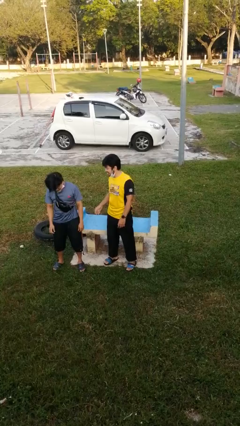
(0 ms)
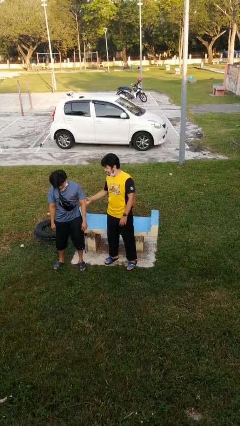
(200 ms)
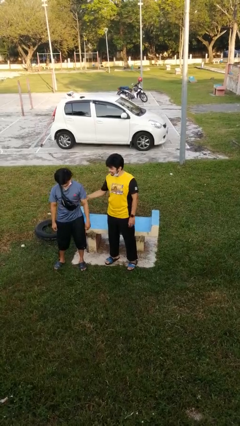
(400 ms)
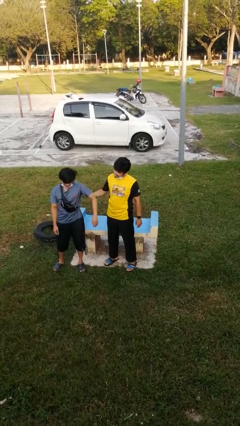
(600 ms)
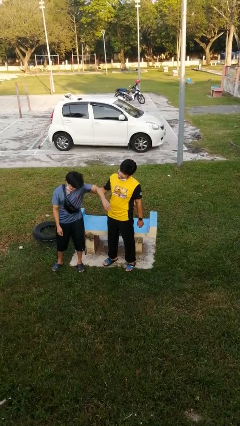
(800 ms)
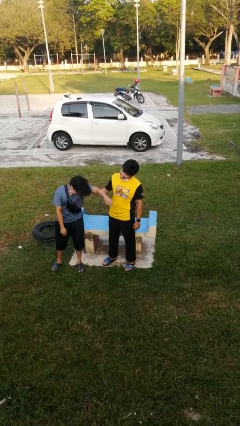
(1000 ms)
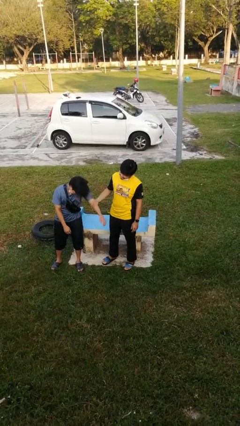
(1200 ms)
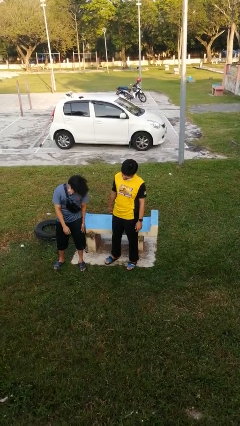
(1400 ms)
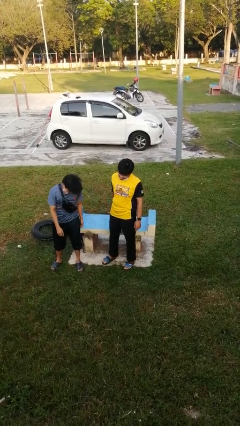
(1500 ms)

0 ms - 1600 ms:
person grabs person by bicep

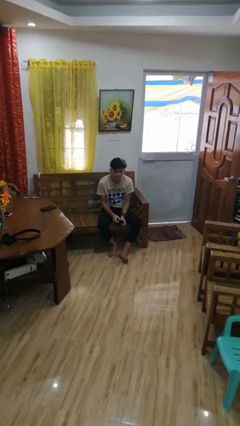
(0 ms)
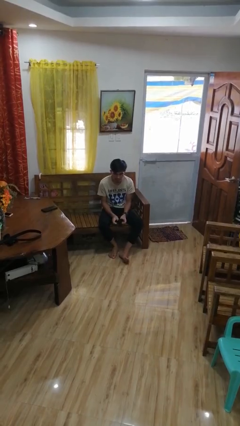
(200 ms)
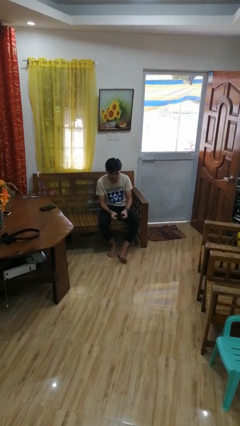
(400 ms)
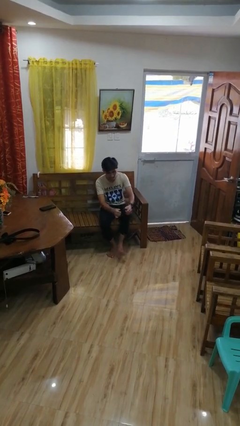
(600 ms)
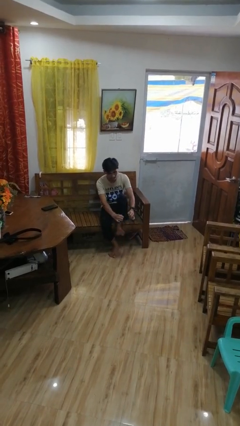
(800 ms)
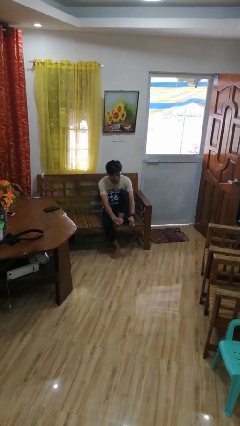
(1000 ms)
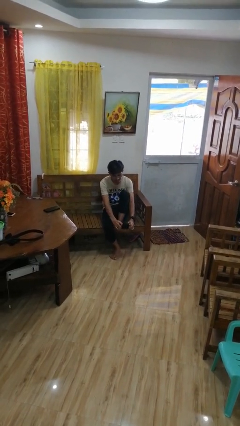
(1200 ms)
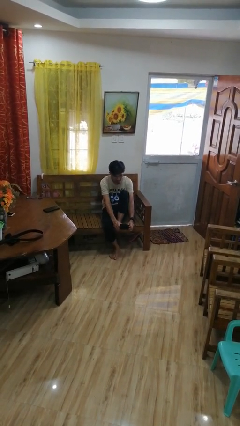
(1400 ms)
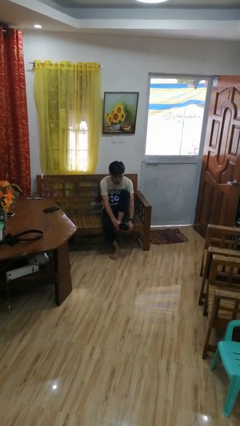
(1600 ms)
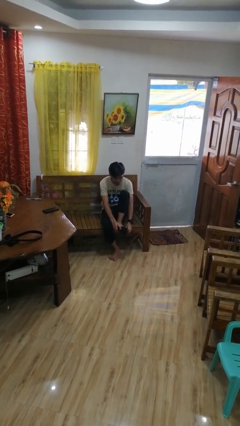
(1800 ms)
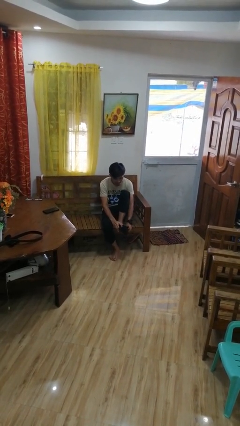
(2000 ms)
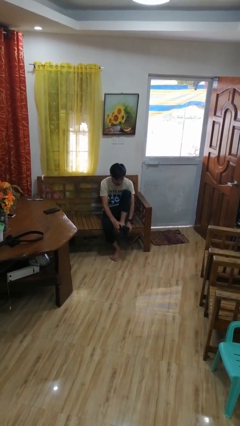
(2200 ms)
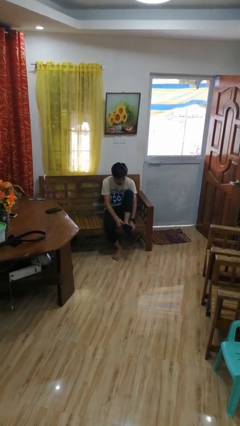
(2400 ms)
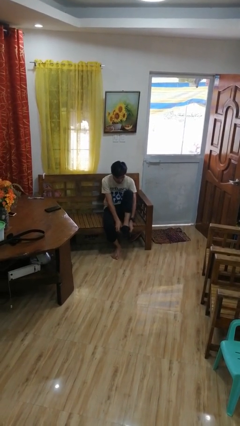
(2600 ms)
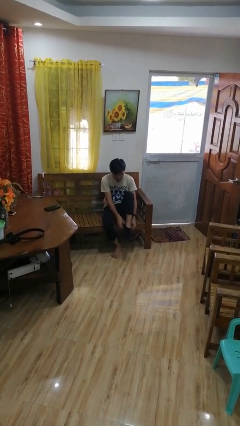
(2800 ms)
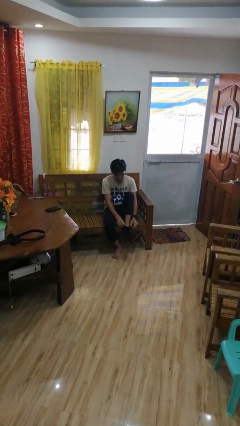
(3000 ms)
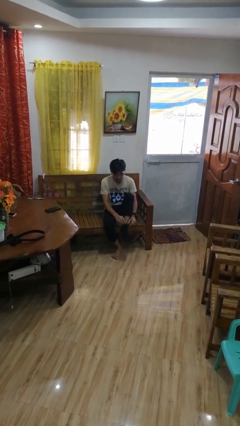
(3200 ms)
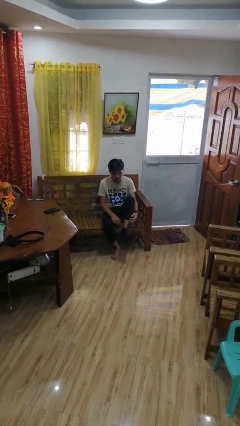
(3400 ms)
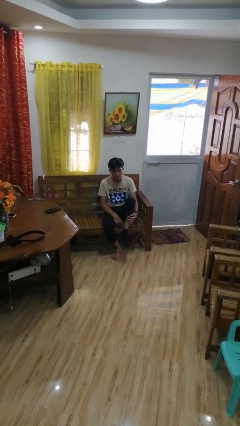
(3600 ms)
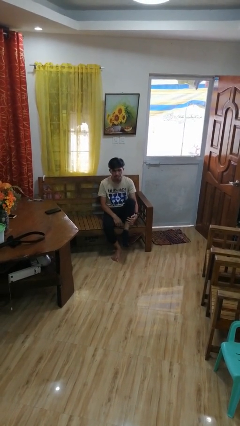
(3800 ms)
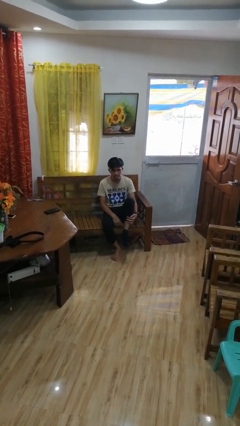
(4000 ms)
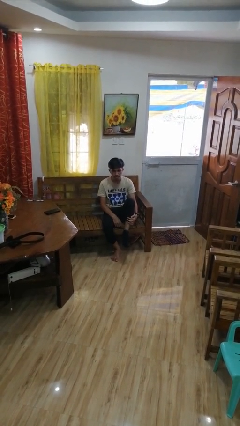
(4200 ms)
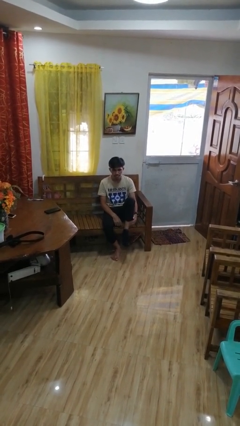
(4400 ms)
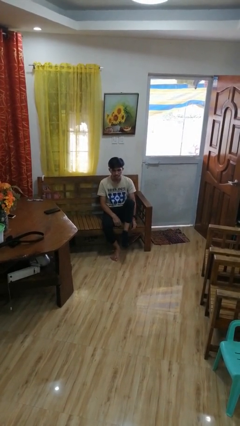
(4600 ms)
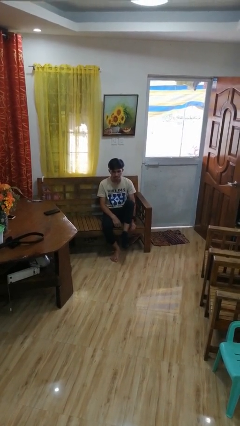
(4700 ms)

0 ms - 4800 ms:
person puts on socks

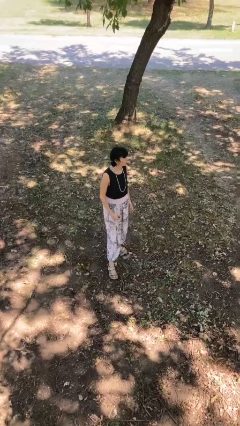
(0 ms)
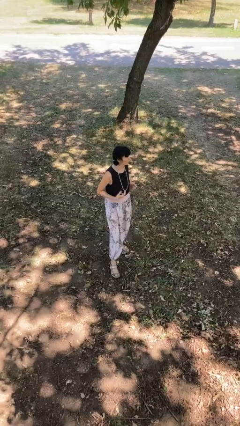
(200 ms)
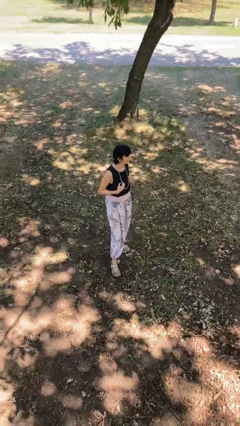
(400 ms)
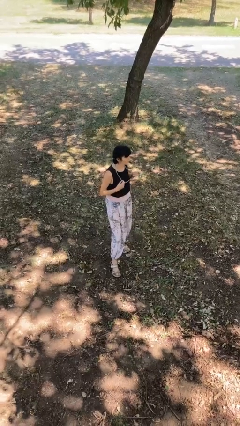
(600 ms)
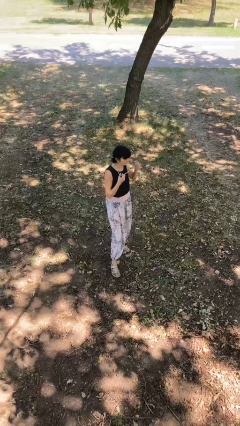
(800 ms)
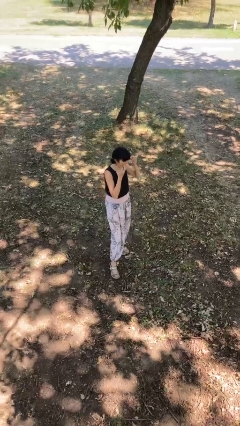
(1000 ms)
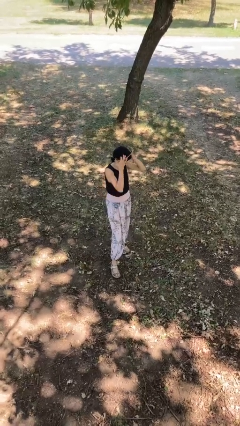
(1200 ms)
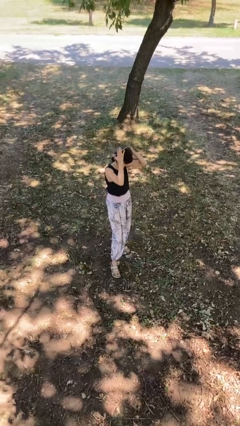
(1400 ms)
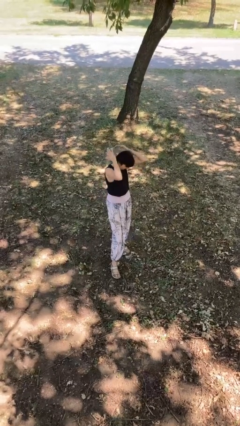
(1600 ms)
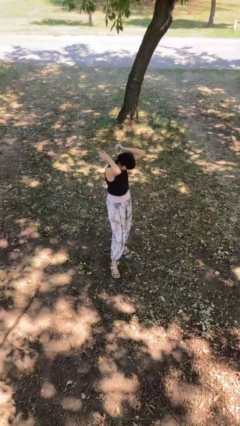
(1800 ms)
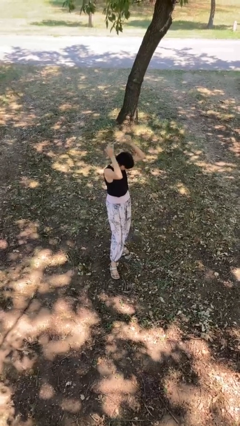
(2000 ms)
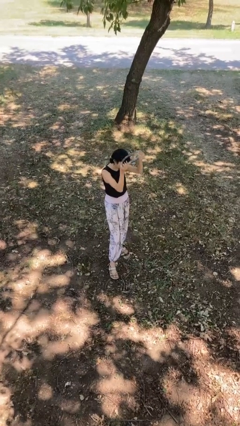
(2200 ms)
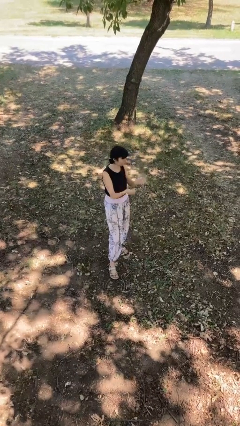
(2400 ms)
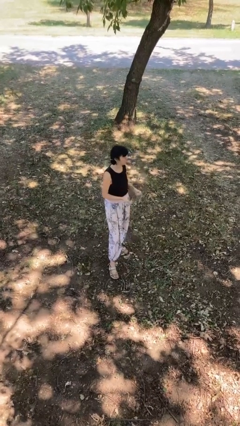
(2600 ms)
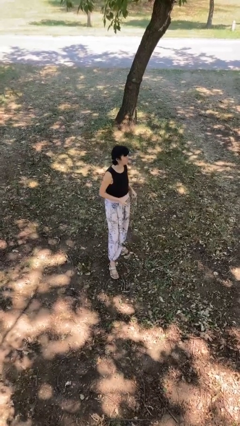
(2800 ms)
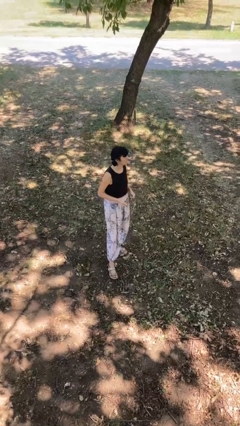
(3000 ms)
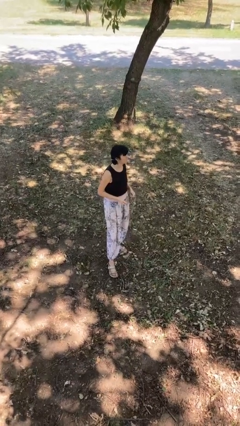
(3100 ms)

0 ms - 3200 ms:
person takes off necklace

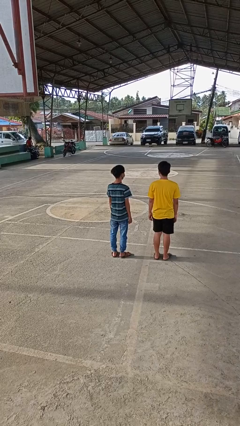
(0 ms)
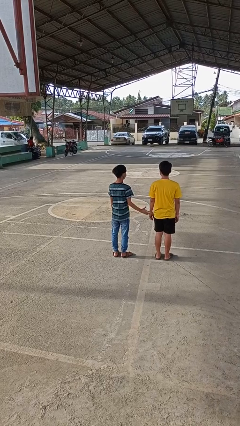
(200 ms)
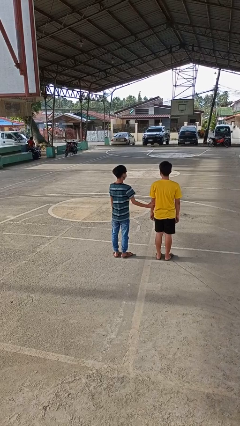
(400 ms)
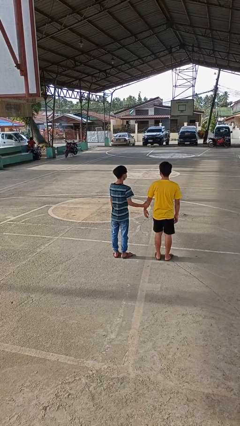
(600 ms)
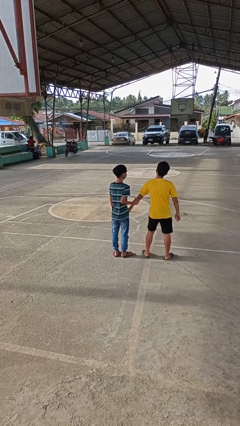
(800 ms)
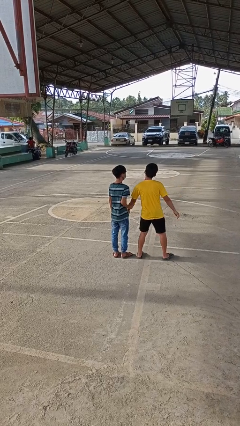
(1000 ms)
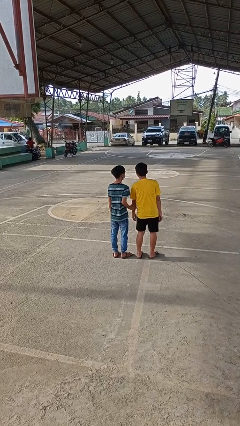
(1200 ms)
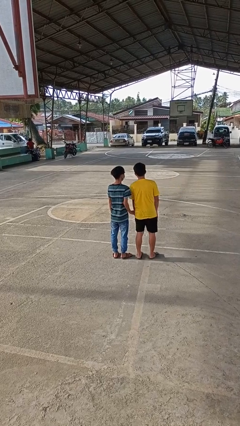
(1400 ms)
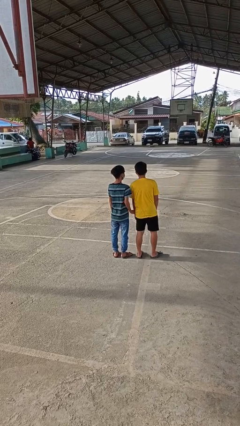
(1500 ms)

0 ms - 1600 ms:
person grabs person by forearm

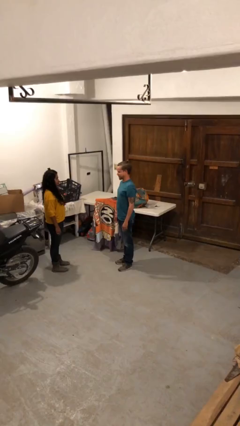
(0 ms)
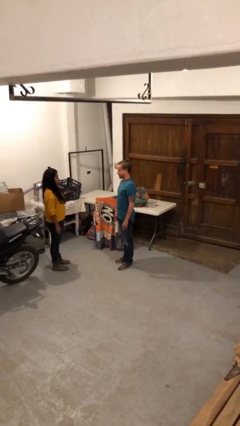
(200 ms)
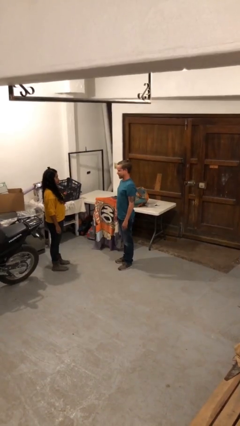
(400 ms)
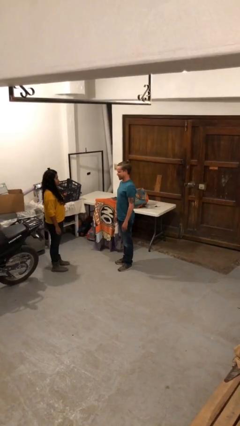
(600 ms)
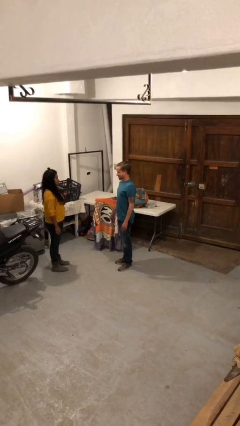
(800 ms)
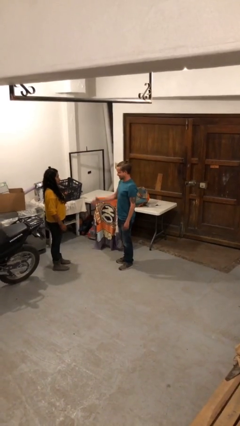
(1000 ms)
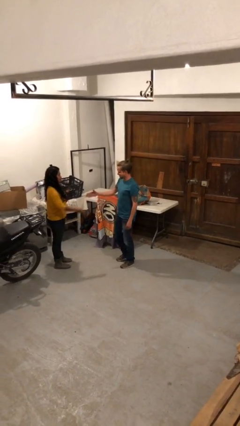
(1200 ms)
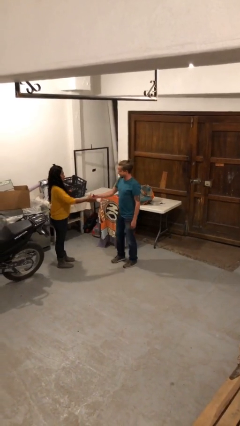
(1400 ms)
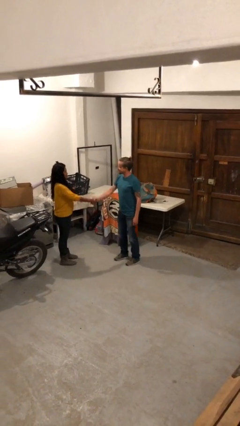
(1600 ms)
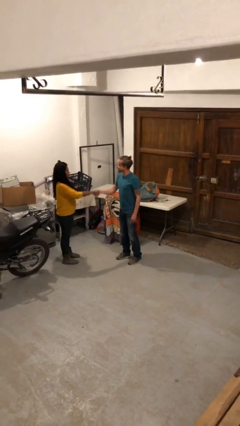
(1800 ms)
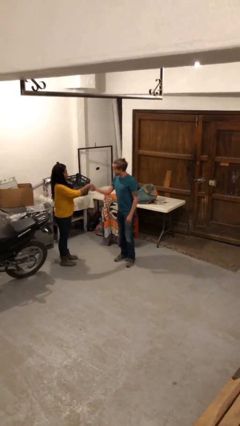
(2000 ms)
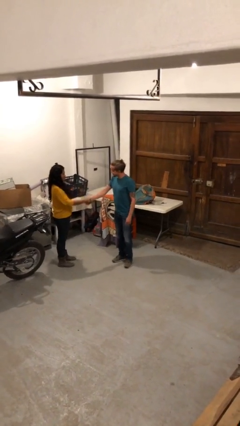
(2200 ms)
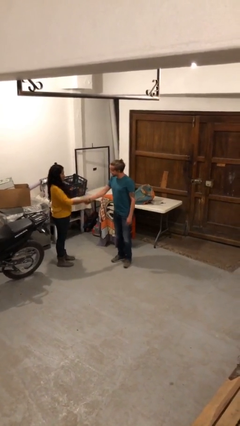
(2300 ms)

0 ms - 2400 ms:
person shakes hand

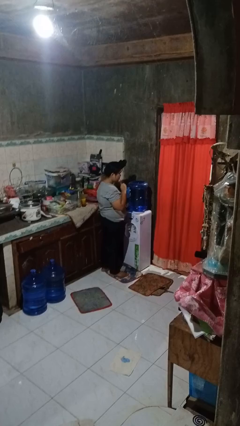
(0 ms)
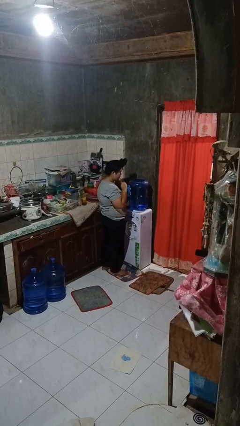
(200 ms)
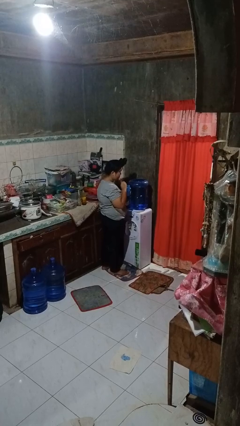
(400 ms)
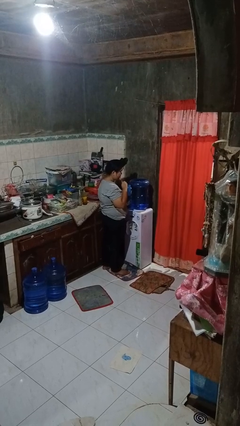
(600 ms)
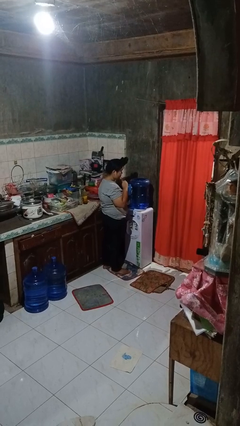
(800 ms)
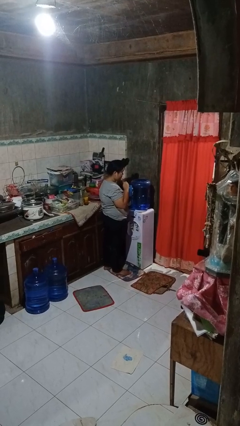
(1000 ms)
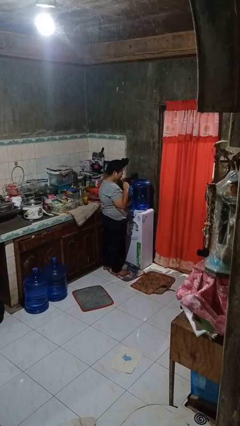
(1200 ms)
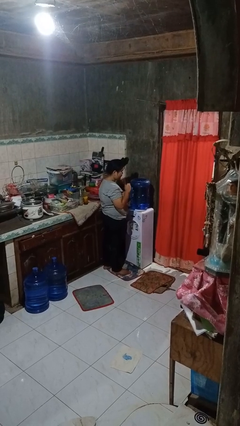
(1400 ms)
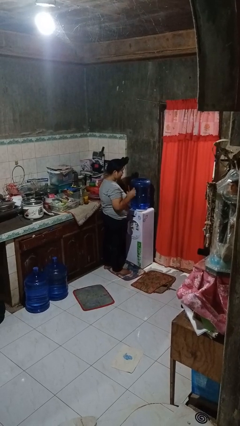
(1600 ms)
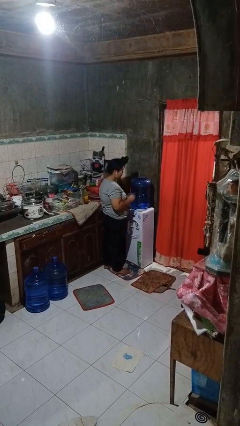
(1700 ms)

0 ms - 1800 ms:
person drinks from straw

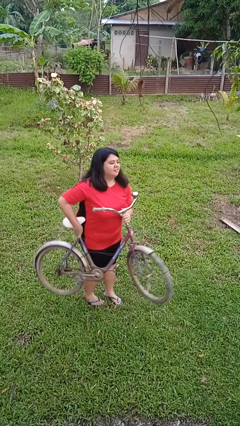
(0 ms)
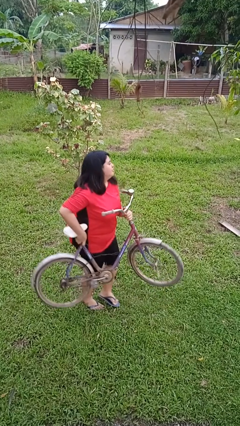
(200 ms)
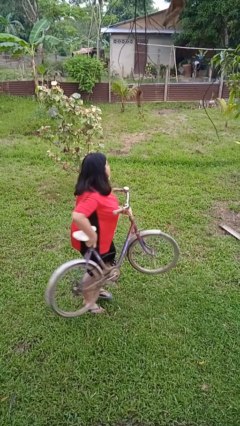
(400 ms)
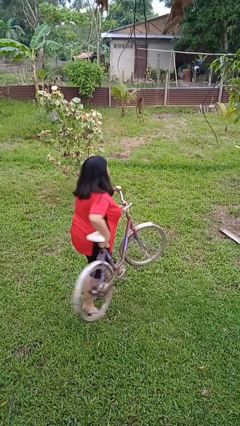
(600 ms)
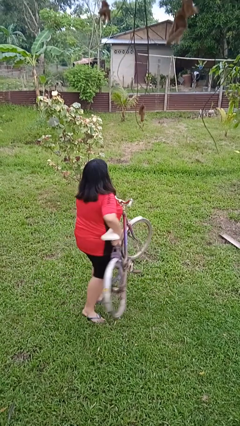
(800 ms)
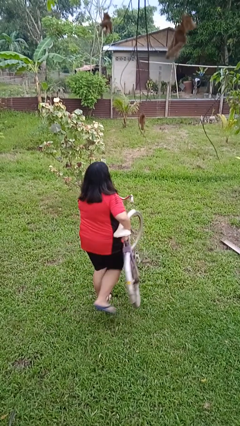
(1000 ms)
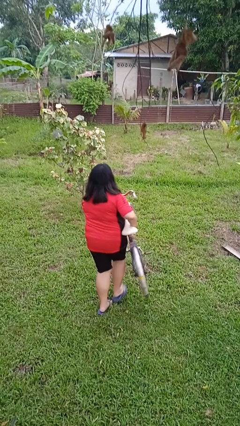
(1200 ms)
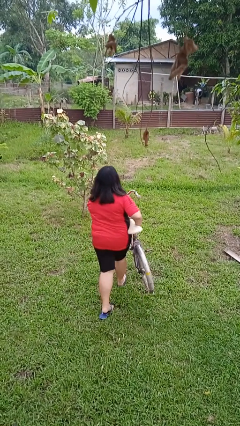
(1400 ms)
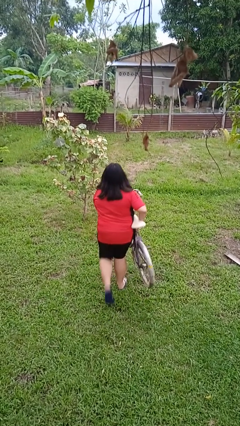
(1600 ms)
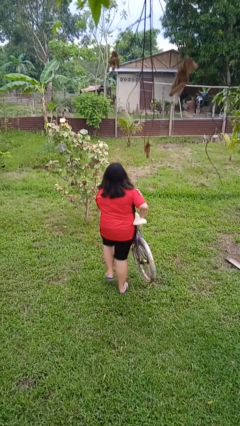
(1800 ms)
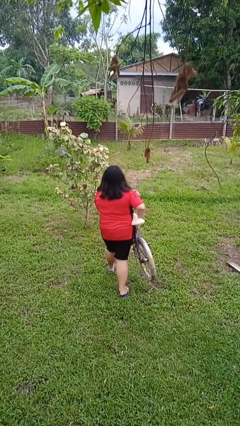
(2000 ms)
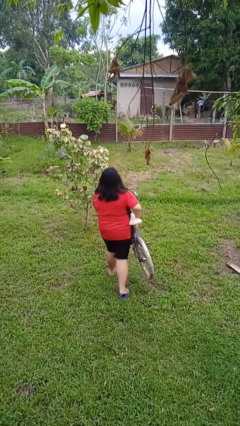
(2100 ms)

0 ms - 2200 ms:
person carries bicycle
